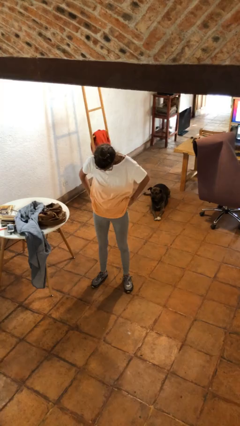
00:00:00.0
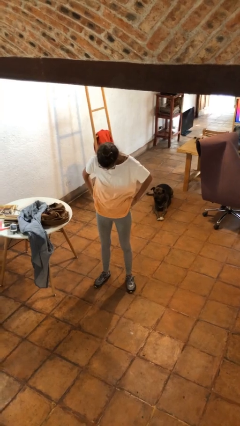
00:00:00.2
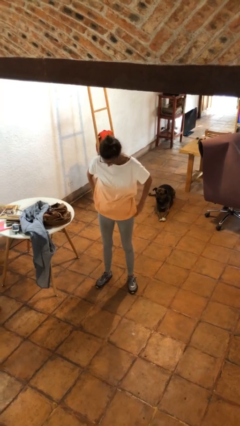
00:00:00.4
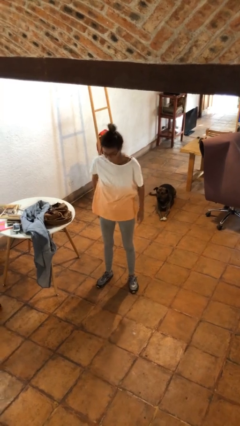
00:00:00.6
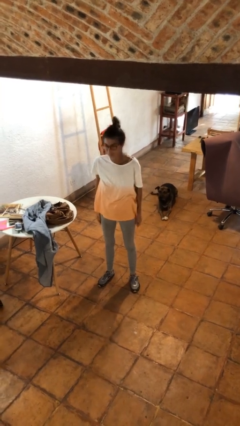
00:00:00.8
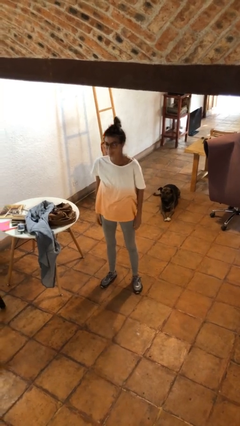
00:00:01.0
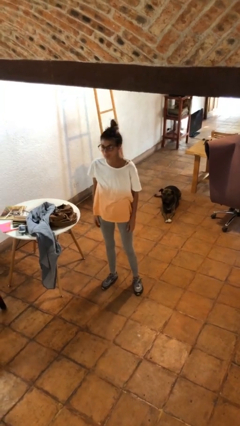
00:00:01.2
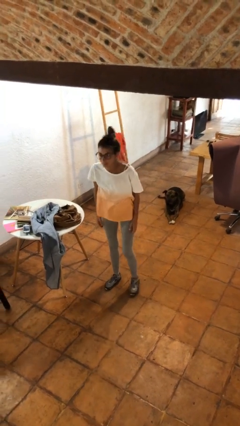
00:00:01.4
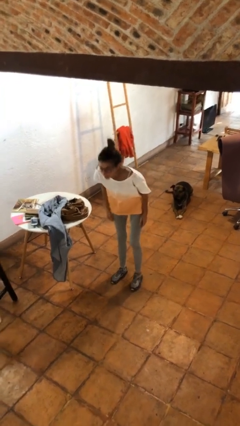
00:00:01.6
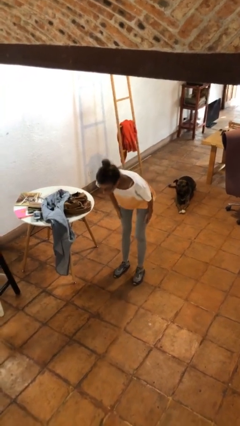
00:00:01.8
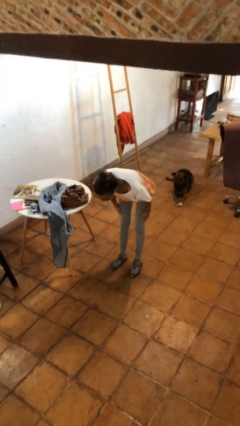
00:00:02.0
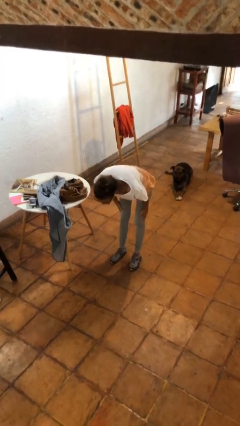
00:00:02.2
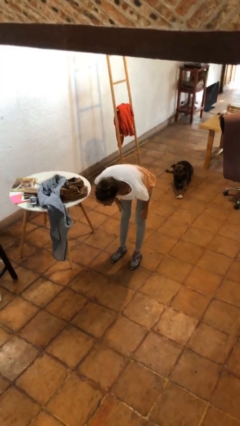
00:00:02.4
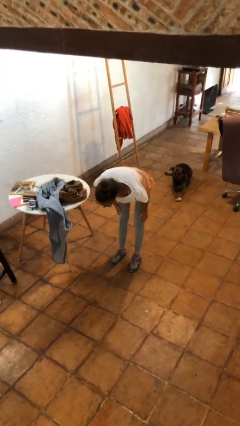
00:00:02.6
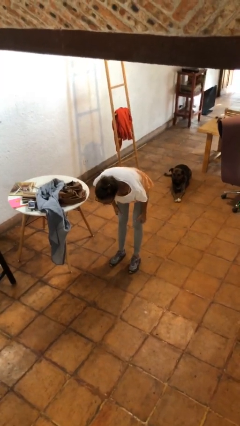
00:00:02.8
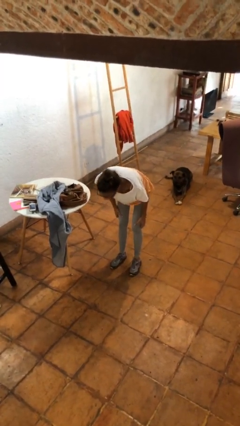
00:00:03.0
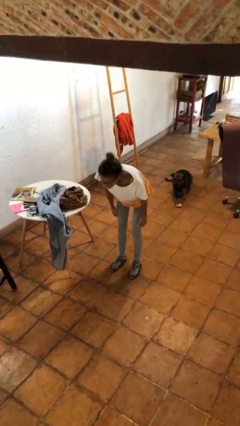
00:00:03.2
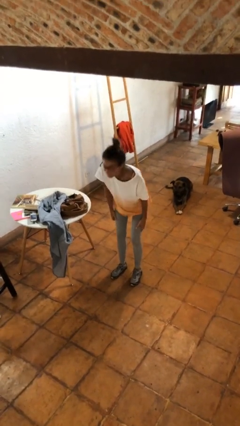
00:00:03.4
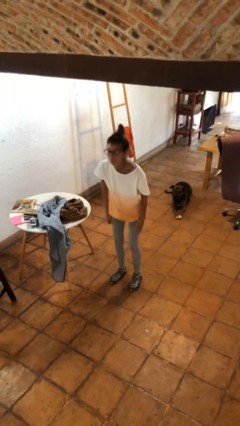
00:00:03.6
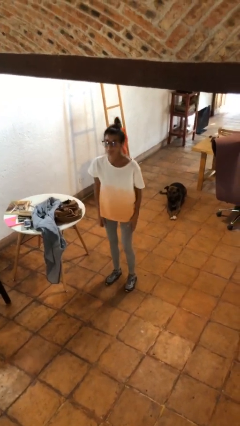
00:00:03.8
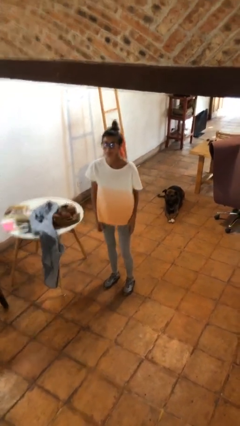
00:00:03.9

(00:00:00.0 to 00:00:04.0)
person bows

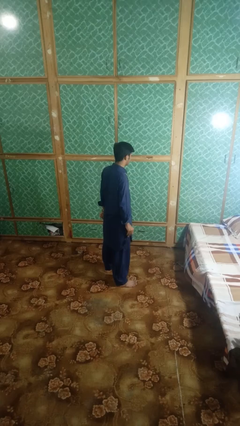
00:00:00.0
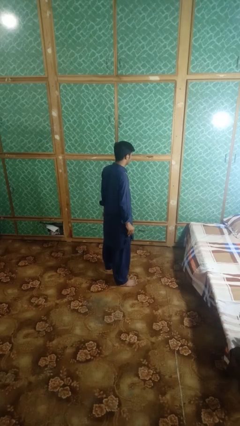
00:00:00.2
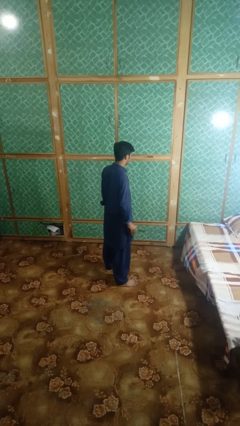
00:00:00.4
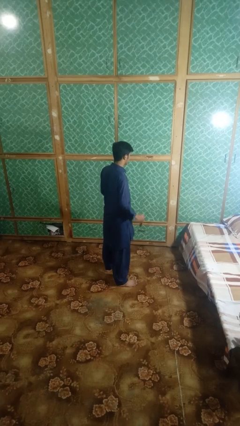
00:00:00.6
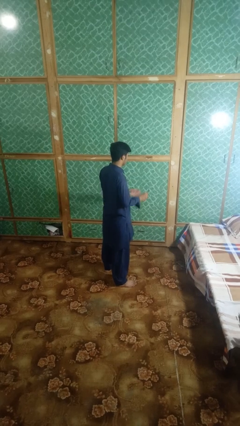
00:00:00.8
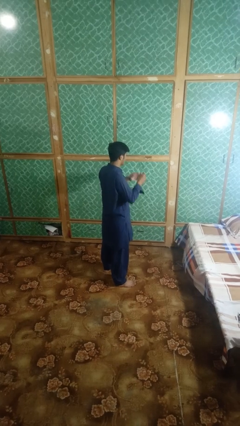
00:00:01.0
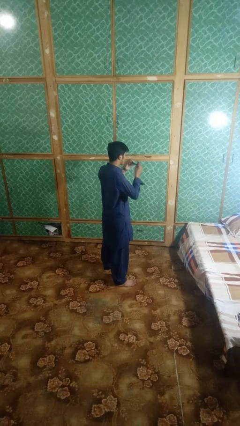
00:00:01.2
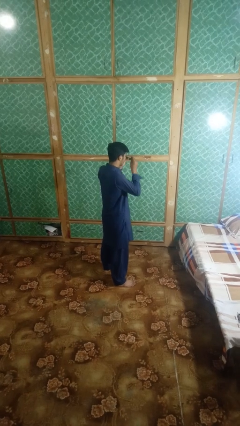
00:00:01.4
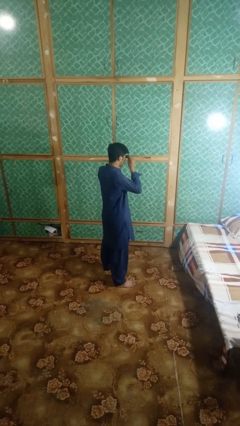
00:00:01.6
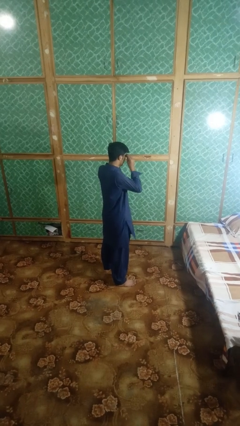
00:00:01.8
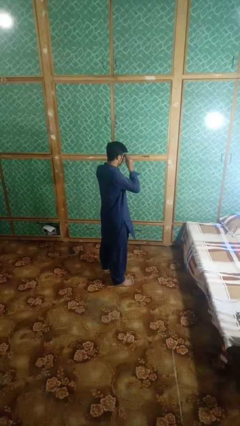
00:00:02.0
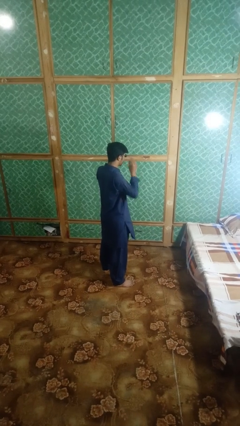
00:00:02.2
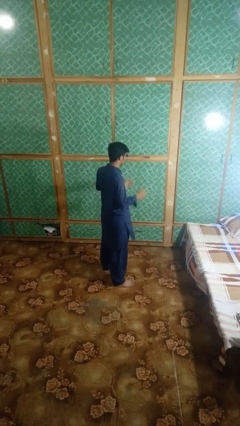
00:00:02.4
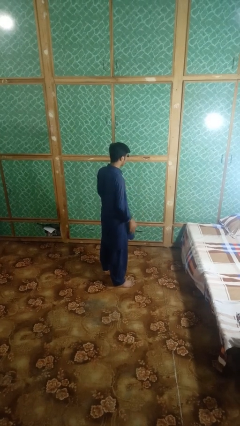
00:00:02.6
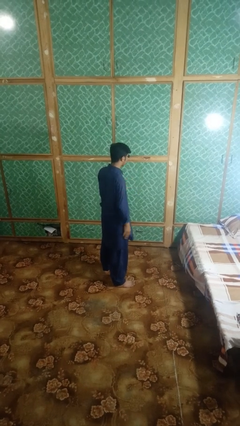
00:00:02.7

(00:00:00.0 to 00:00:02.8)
person puts on sunglasses

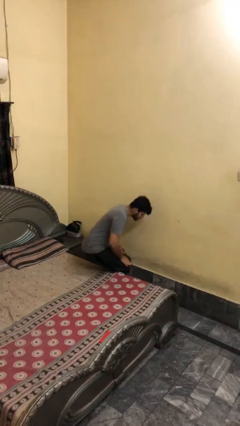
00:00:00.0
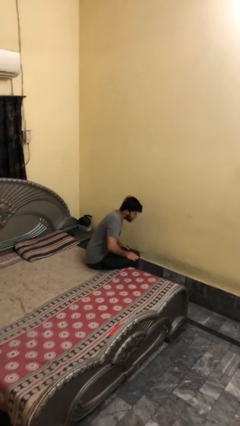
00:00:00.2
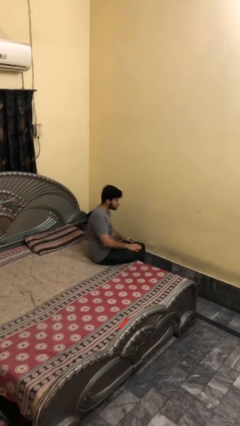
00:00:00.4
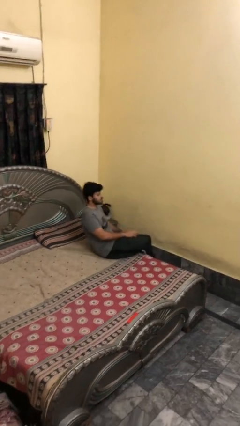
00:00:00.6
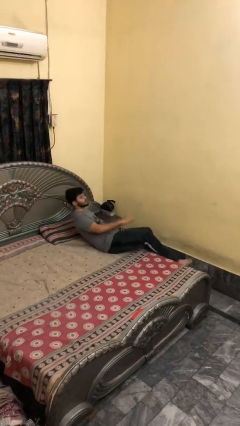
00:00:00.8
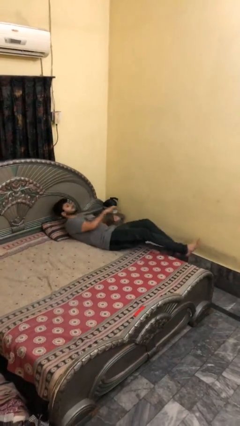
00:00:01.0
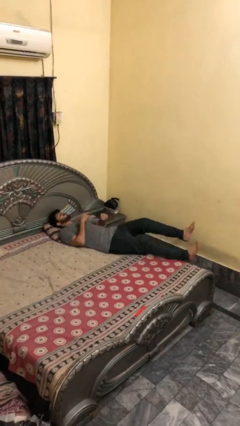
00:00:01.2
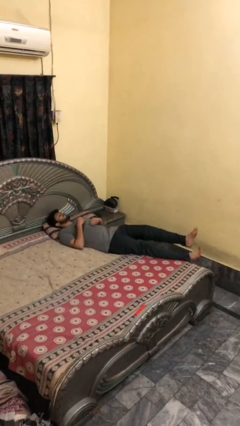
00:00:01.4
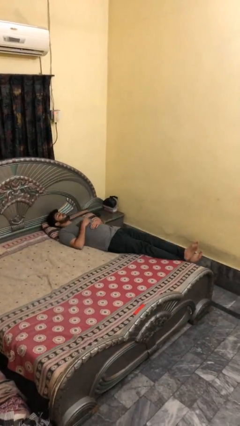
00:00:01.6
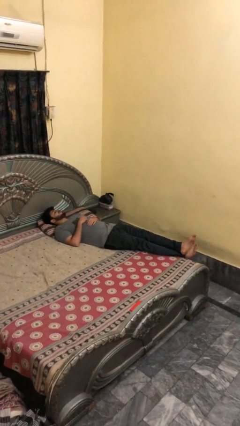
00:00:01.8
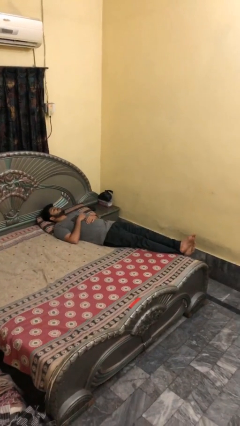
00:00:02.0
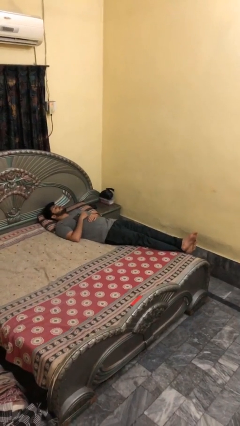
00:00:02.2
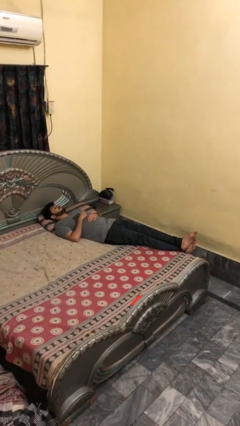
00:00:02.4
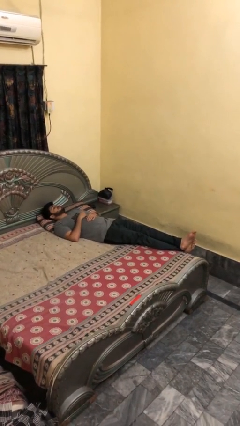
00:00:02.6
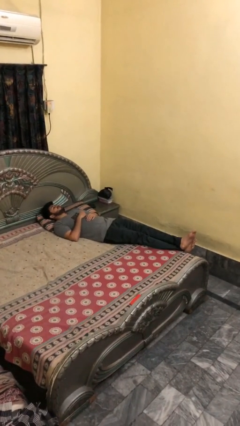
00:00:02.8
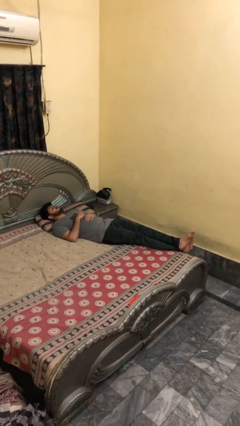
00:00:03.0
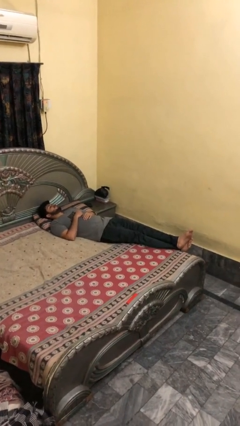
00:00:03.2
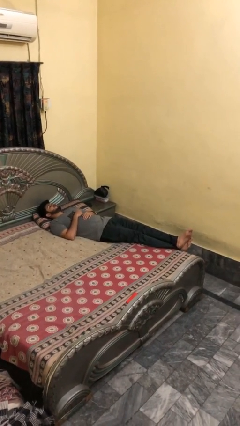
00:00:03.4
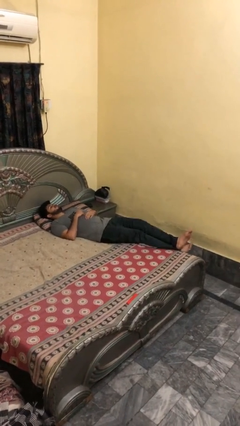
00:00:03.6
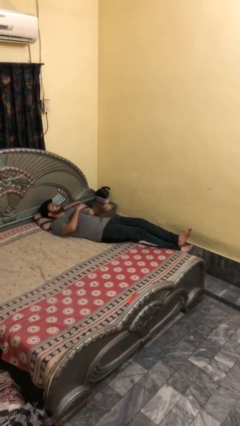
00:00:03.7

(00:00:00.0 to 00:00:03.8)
person lies down on bed

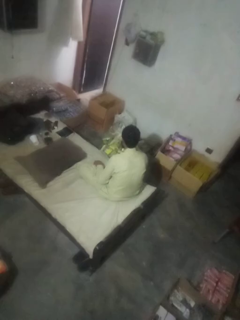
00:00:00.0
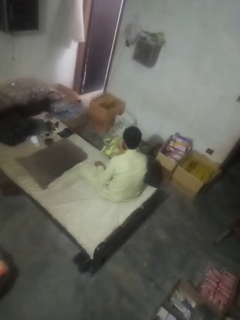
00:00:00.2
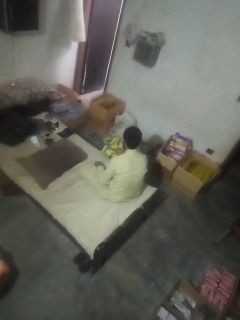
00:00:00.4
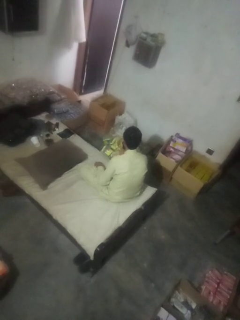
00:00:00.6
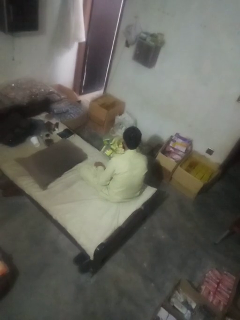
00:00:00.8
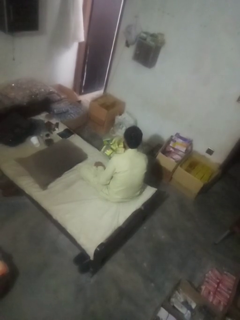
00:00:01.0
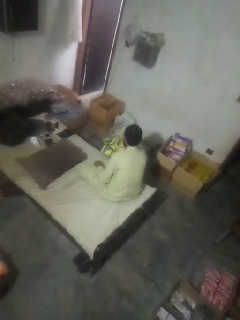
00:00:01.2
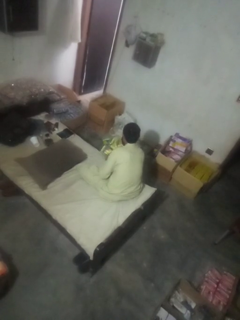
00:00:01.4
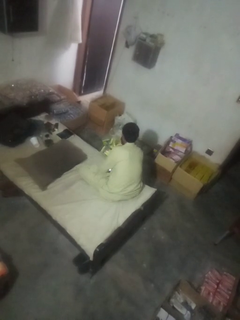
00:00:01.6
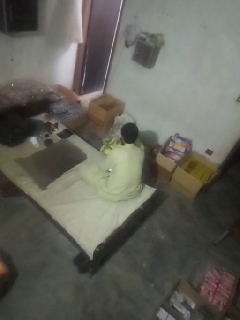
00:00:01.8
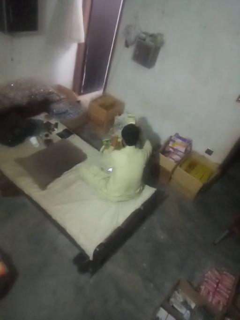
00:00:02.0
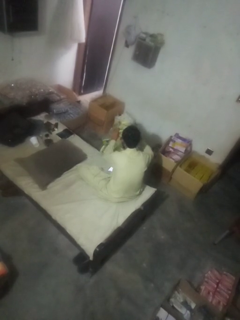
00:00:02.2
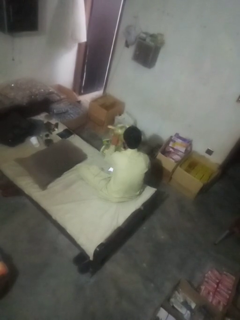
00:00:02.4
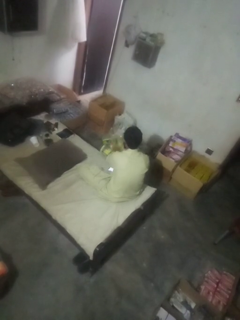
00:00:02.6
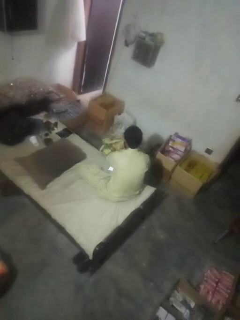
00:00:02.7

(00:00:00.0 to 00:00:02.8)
person searches in box

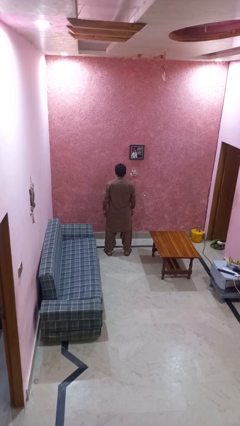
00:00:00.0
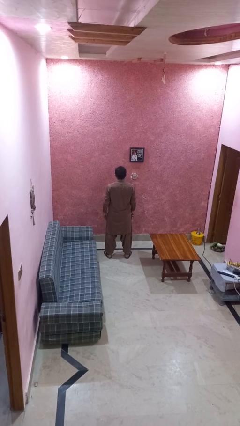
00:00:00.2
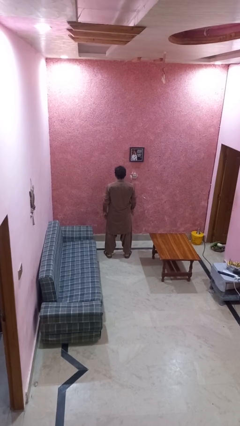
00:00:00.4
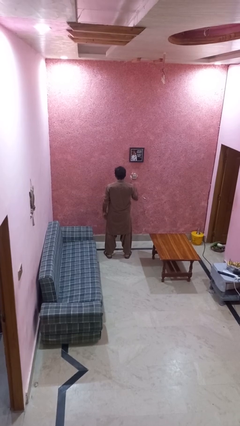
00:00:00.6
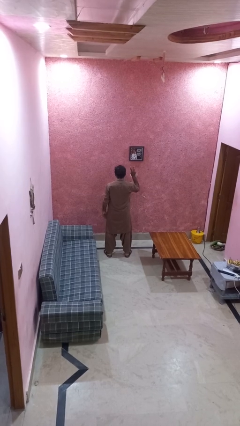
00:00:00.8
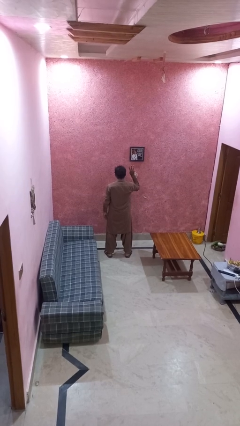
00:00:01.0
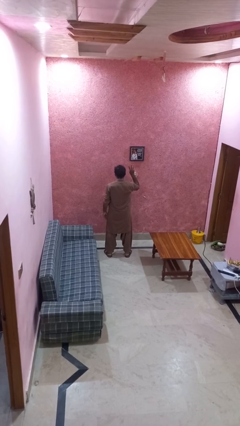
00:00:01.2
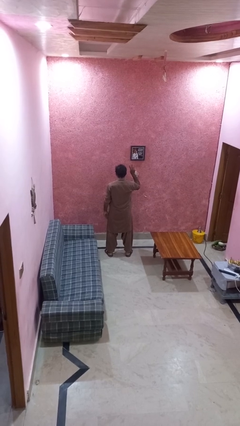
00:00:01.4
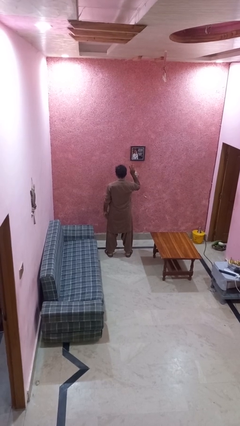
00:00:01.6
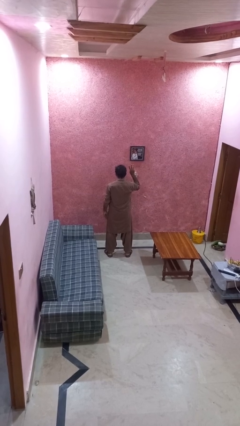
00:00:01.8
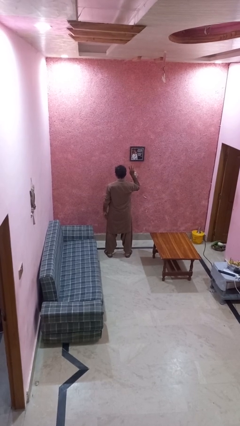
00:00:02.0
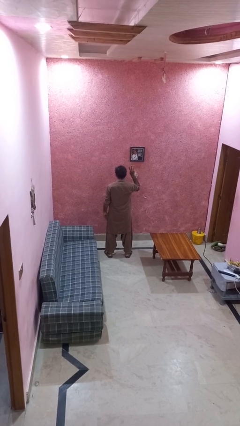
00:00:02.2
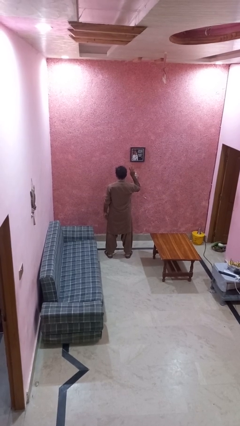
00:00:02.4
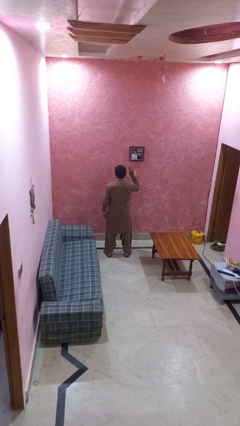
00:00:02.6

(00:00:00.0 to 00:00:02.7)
person gestures number three

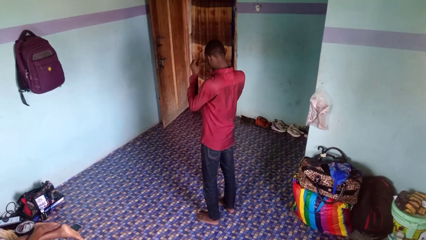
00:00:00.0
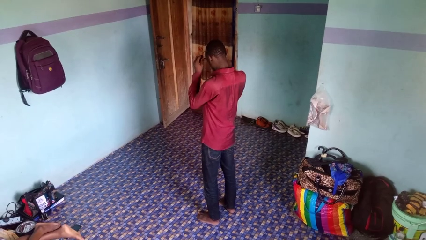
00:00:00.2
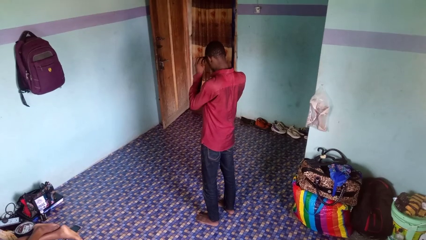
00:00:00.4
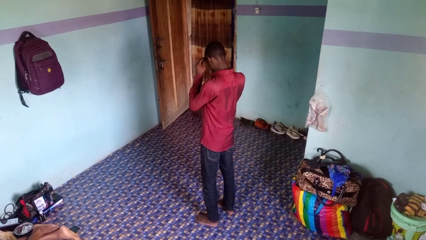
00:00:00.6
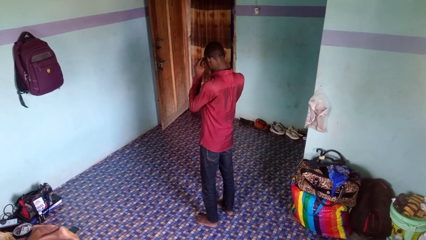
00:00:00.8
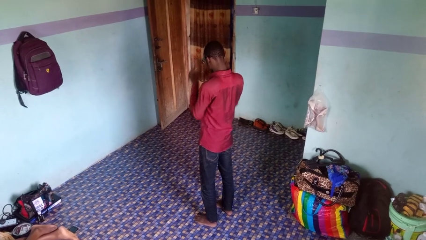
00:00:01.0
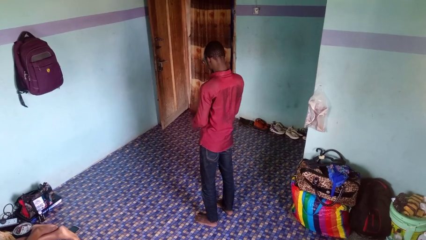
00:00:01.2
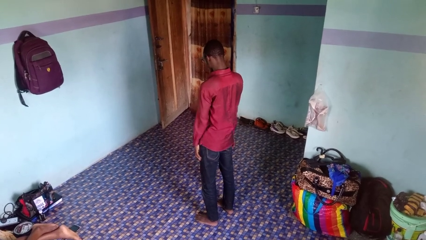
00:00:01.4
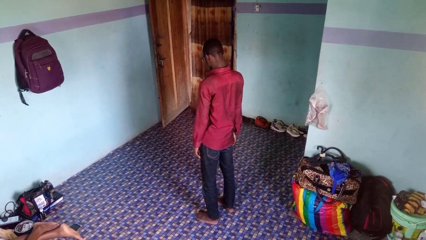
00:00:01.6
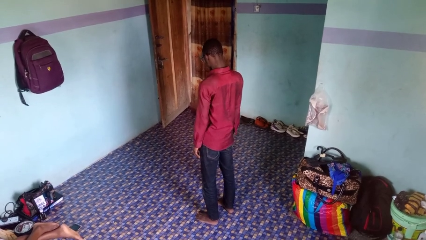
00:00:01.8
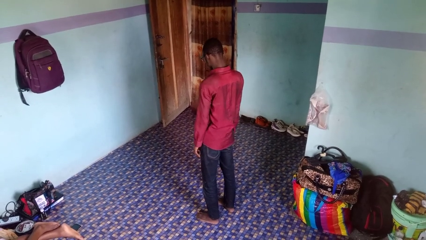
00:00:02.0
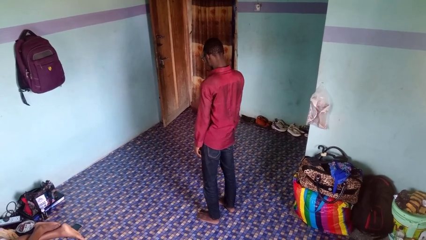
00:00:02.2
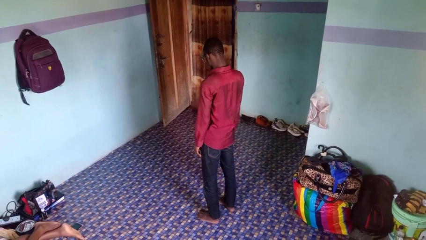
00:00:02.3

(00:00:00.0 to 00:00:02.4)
person puts on glasses
